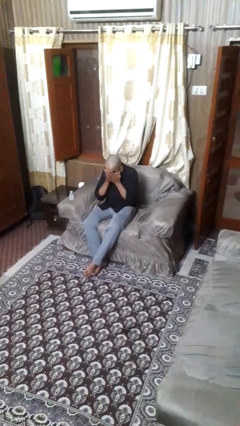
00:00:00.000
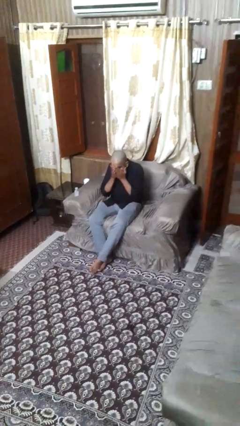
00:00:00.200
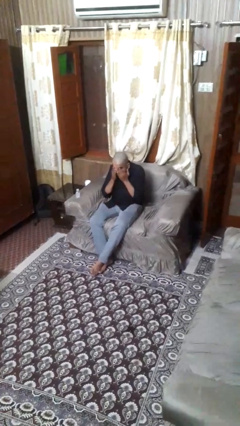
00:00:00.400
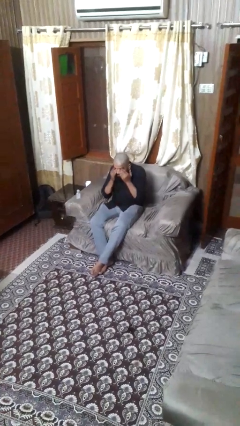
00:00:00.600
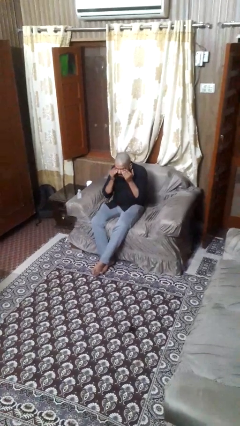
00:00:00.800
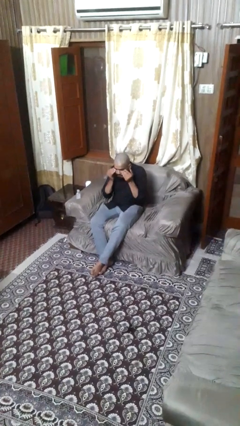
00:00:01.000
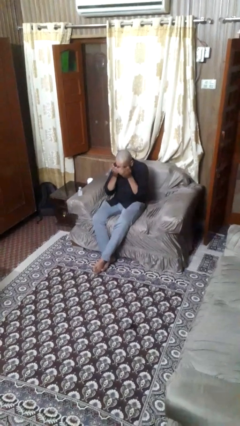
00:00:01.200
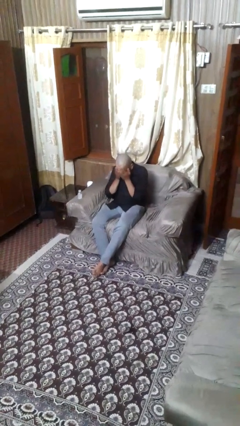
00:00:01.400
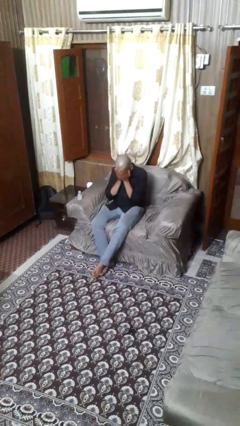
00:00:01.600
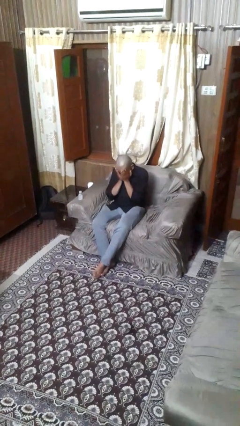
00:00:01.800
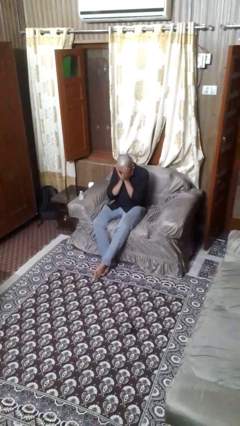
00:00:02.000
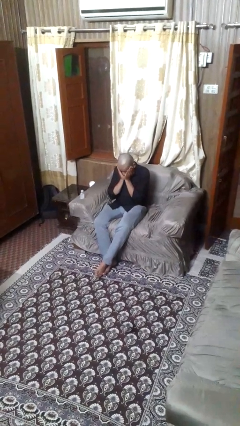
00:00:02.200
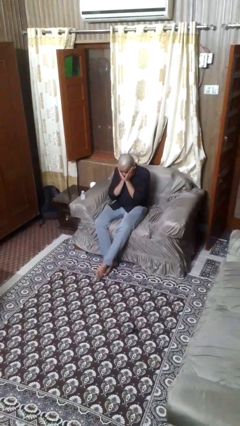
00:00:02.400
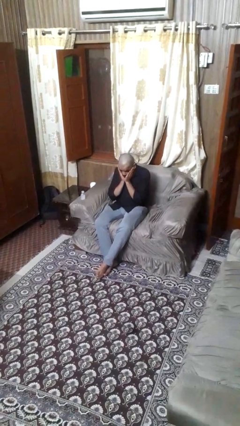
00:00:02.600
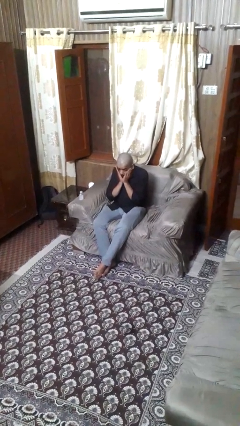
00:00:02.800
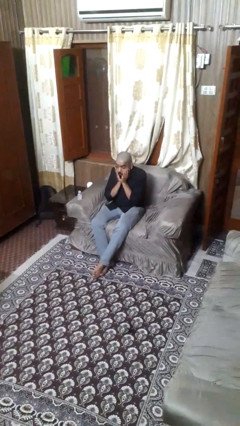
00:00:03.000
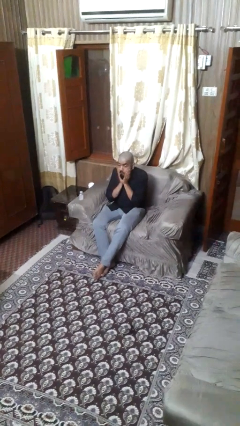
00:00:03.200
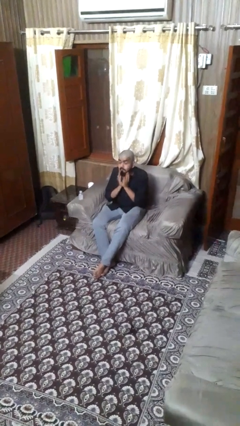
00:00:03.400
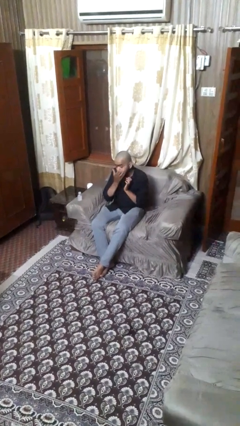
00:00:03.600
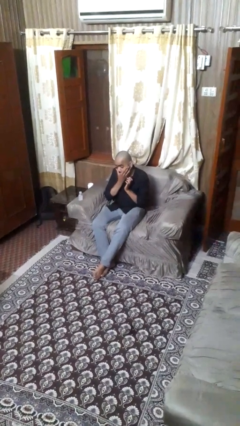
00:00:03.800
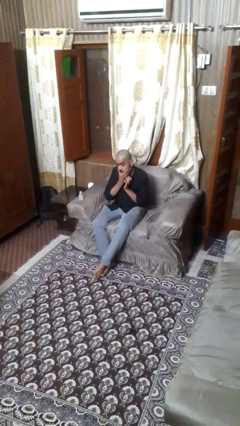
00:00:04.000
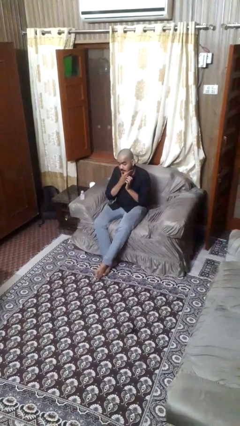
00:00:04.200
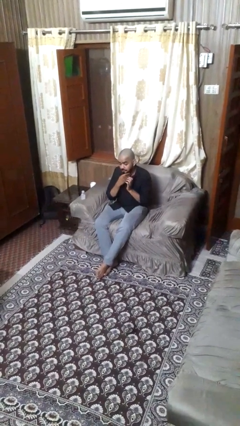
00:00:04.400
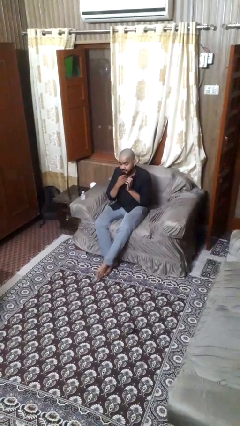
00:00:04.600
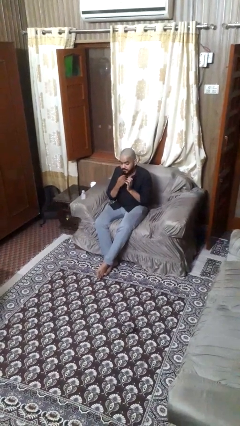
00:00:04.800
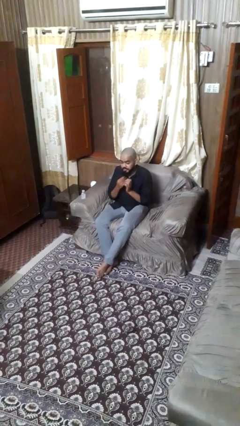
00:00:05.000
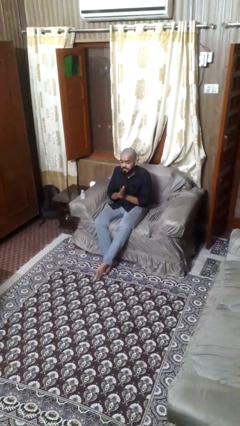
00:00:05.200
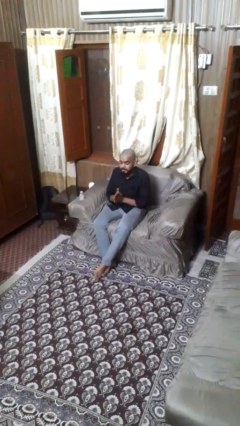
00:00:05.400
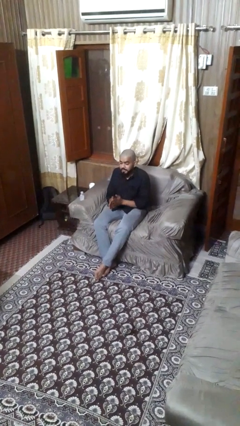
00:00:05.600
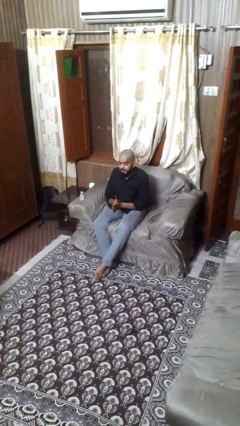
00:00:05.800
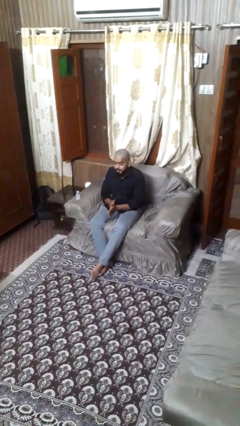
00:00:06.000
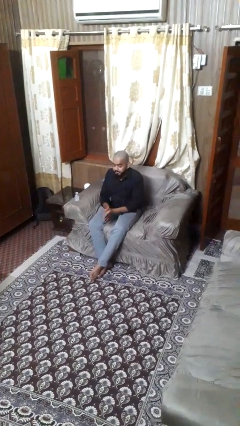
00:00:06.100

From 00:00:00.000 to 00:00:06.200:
person applies facial moisturizer

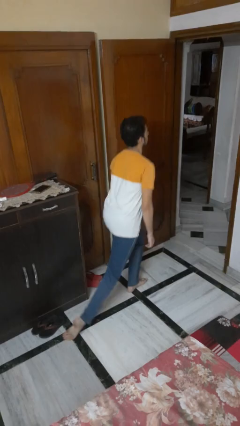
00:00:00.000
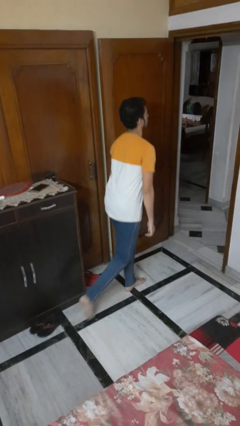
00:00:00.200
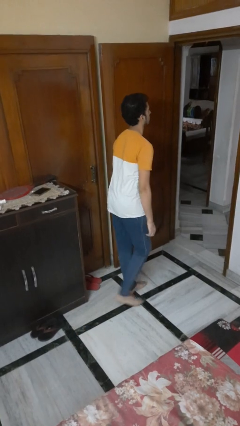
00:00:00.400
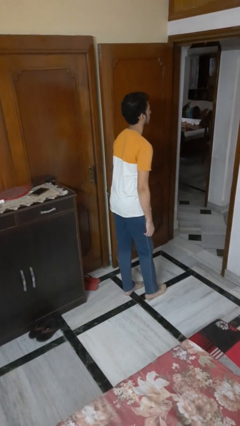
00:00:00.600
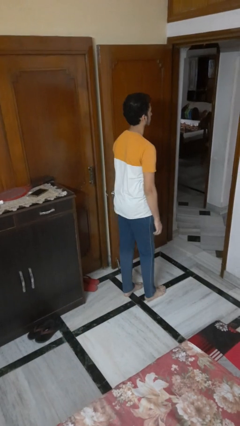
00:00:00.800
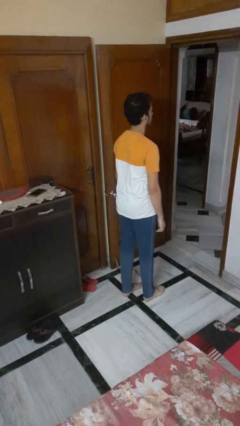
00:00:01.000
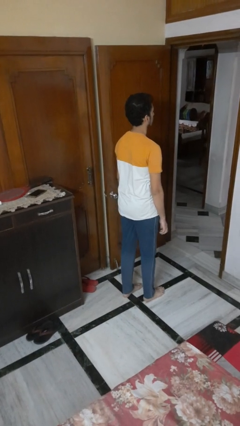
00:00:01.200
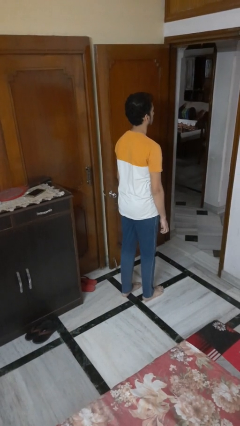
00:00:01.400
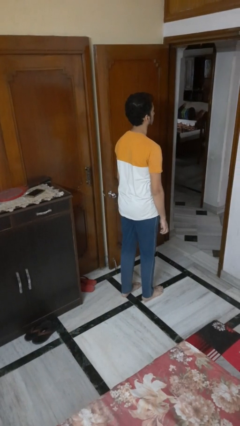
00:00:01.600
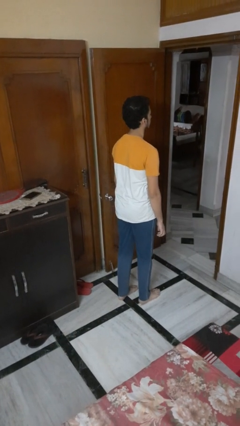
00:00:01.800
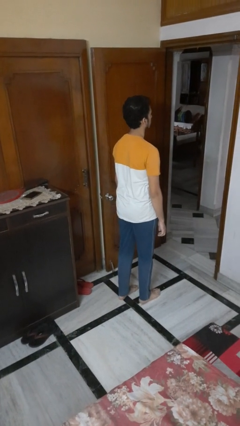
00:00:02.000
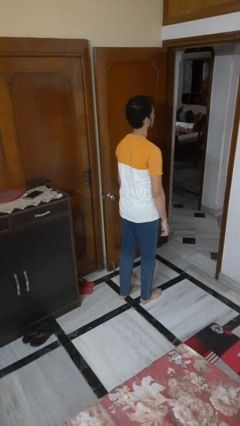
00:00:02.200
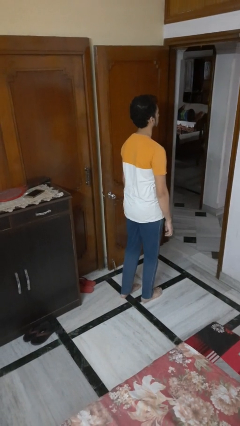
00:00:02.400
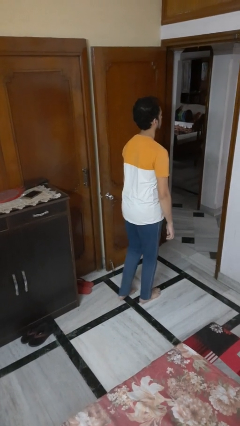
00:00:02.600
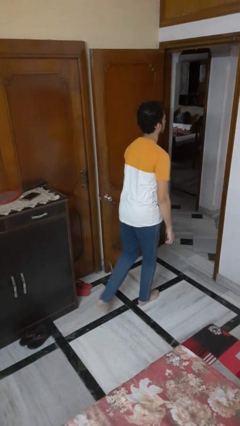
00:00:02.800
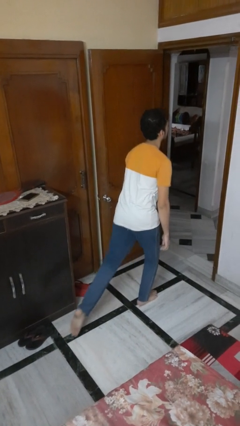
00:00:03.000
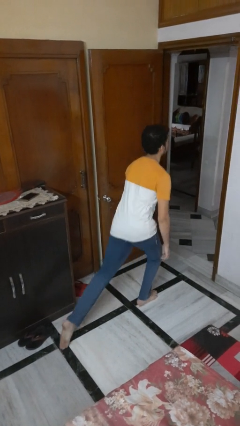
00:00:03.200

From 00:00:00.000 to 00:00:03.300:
person stands up from floor

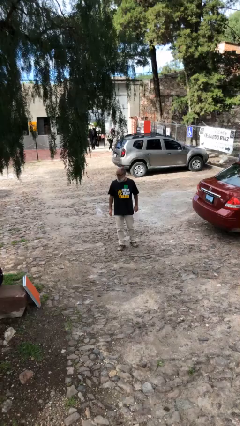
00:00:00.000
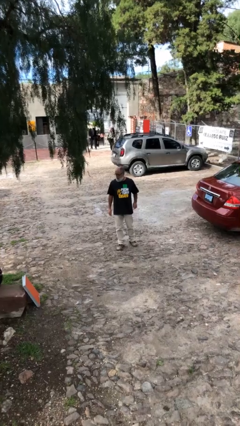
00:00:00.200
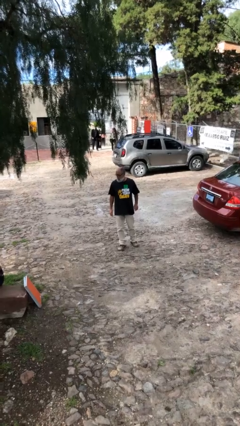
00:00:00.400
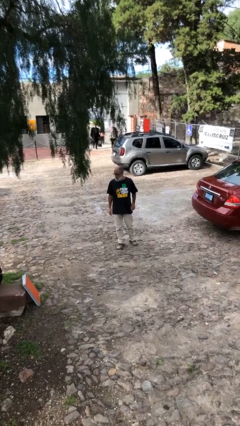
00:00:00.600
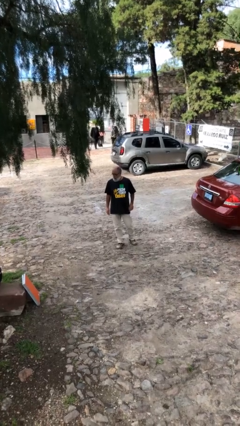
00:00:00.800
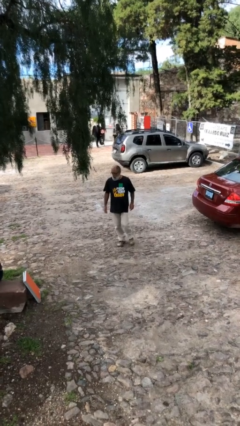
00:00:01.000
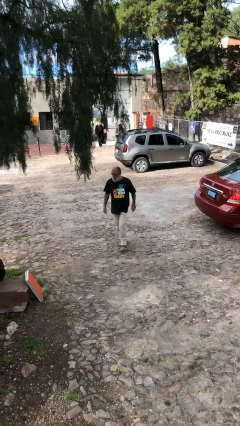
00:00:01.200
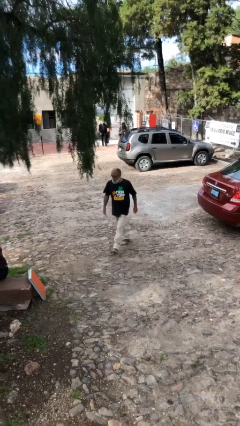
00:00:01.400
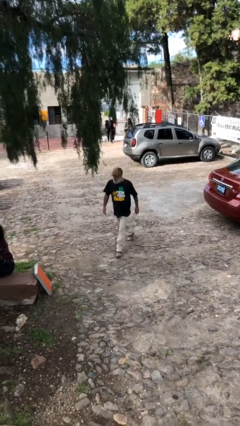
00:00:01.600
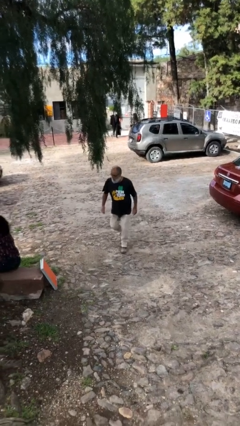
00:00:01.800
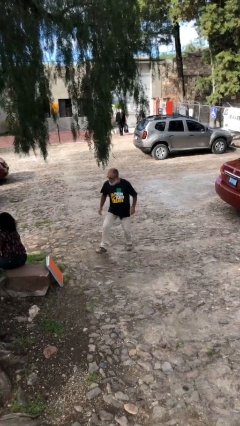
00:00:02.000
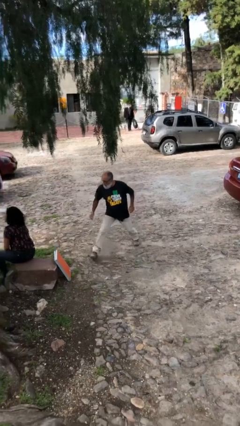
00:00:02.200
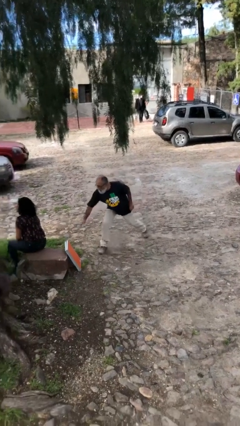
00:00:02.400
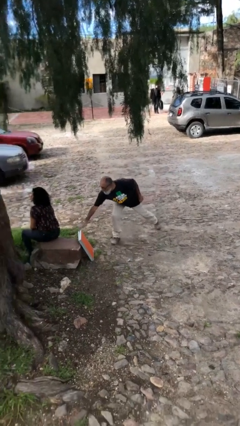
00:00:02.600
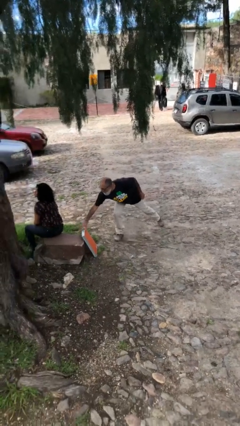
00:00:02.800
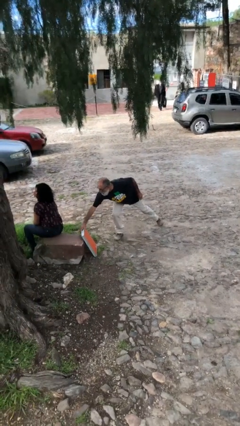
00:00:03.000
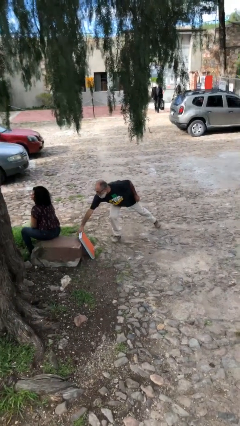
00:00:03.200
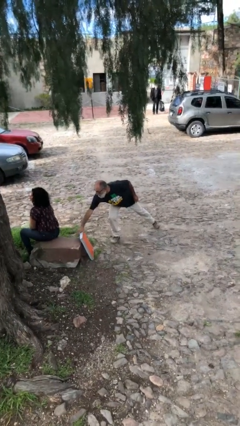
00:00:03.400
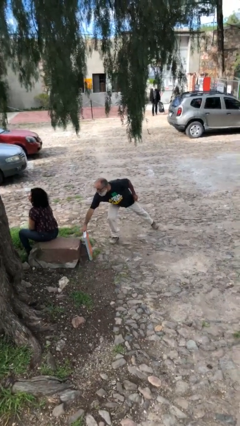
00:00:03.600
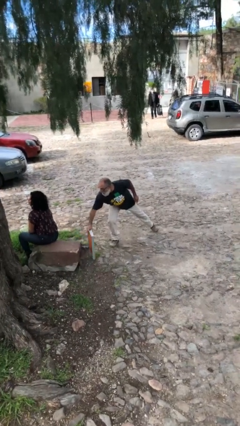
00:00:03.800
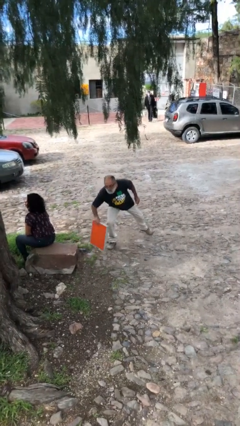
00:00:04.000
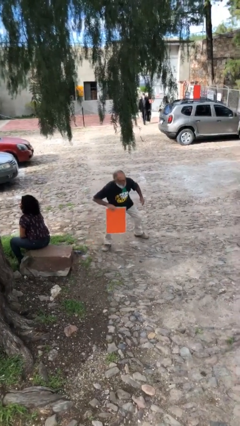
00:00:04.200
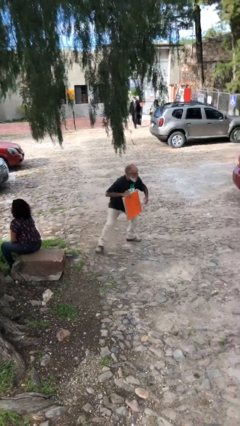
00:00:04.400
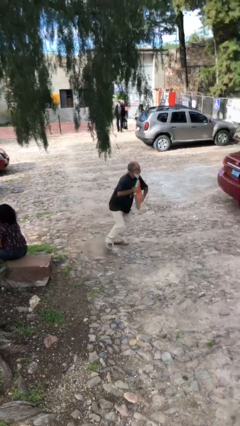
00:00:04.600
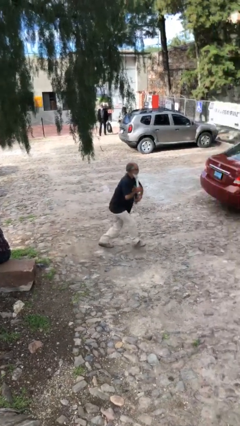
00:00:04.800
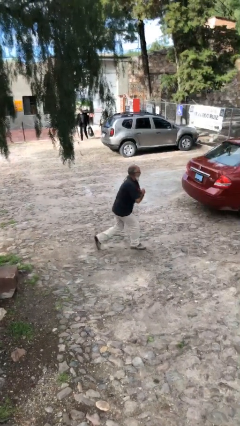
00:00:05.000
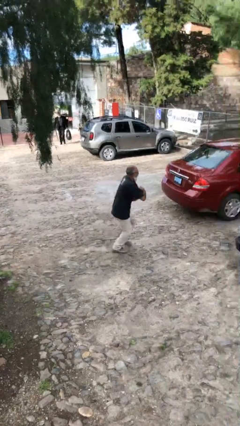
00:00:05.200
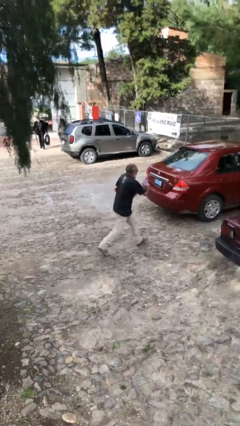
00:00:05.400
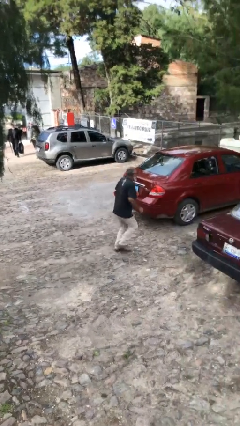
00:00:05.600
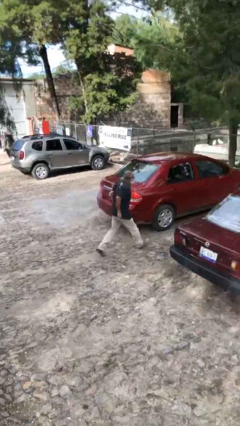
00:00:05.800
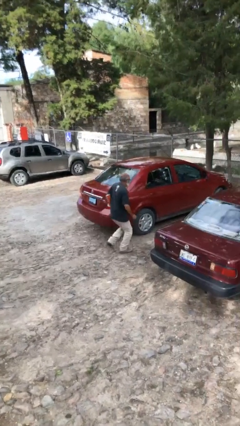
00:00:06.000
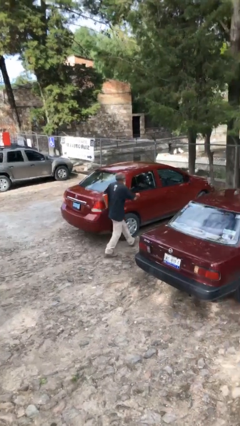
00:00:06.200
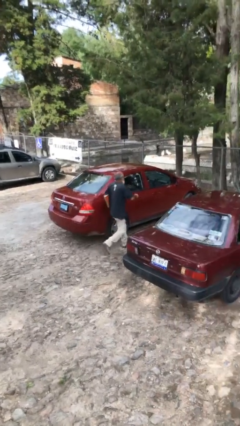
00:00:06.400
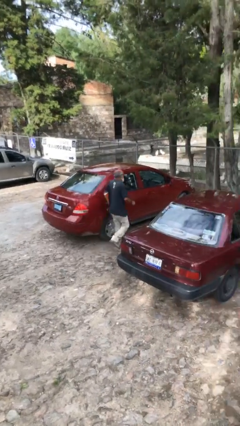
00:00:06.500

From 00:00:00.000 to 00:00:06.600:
person steals object from person

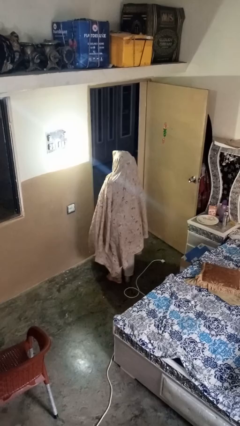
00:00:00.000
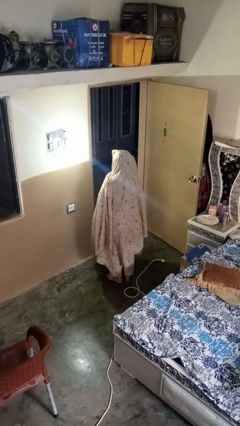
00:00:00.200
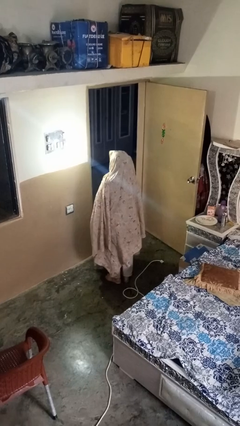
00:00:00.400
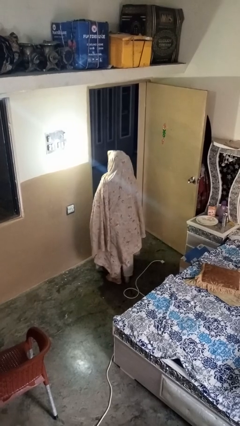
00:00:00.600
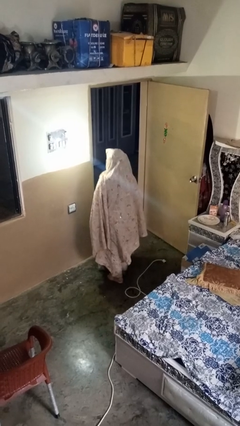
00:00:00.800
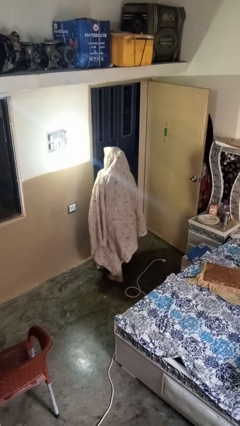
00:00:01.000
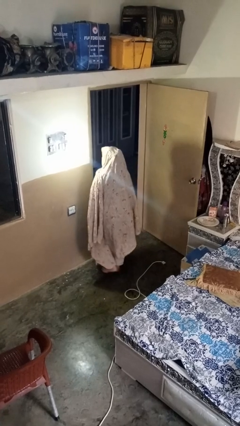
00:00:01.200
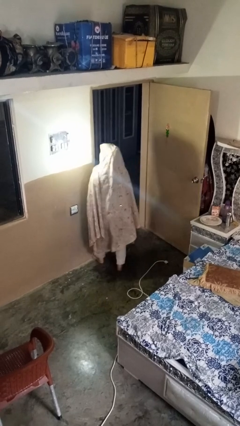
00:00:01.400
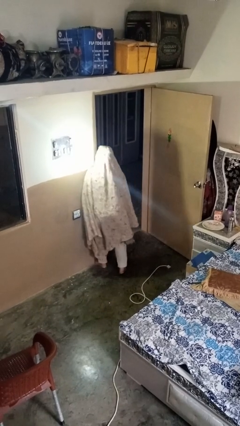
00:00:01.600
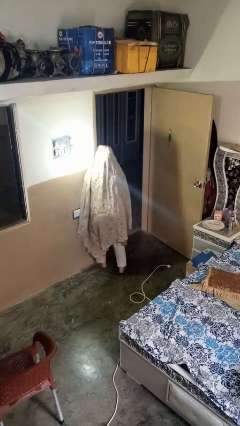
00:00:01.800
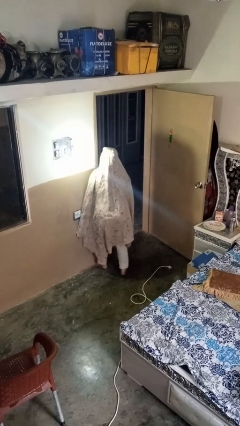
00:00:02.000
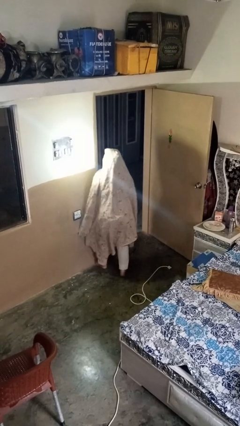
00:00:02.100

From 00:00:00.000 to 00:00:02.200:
person bumps into wall
